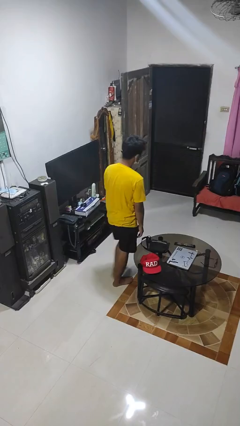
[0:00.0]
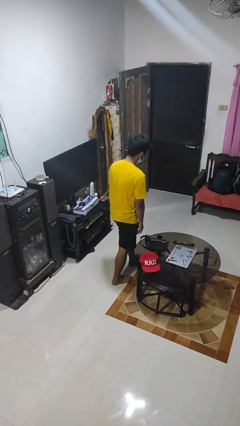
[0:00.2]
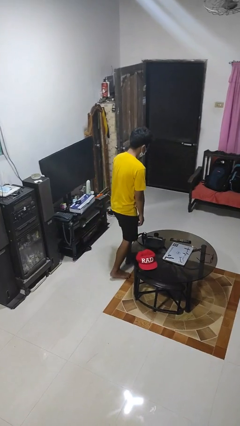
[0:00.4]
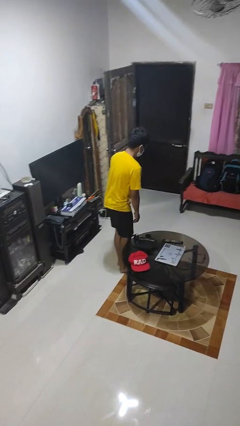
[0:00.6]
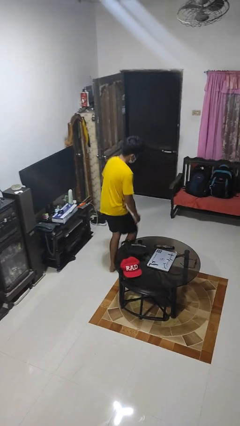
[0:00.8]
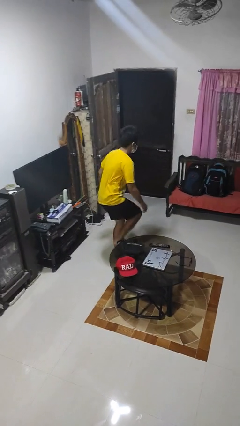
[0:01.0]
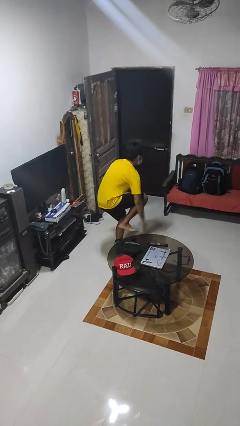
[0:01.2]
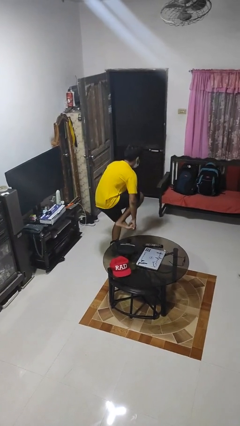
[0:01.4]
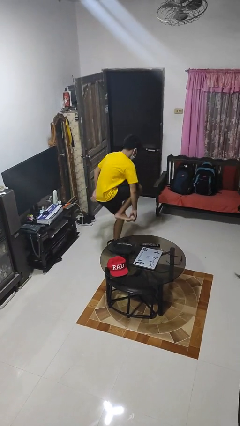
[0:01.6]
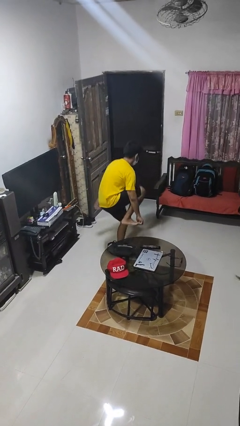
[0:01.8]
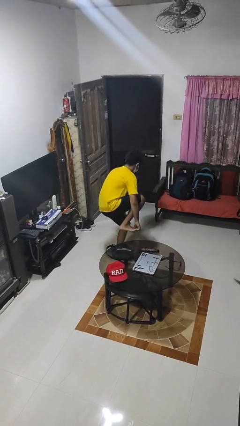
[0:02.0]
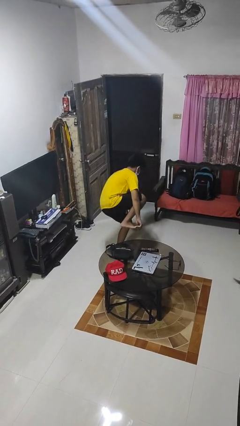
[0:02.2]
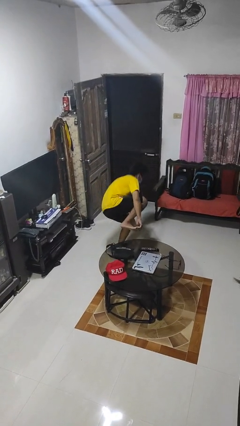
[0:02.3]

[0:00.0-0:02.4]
person trips on object on floor

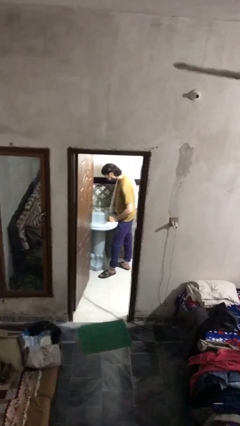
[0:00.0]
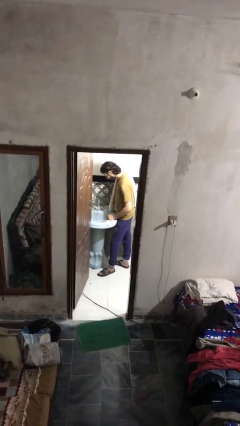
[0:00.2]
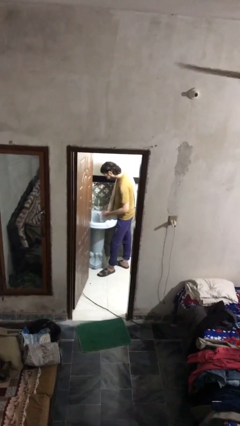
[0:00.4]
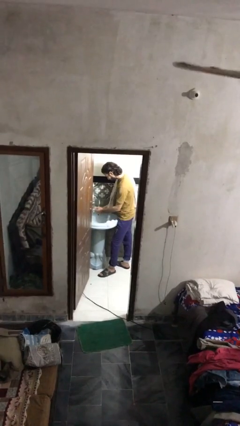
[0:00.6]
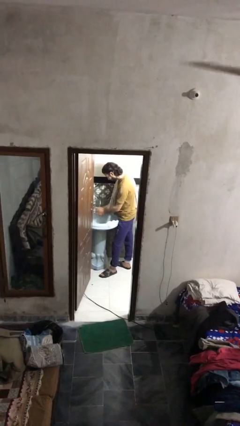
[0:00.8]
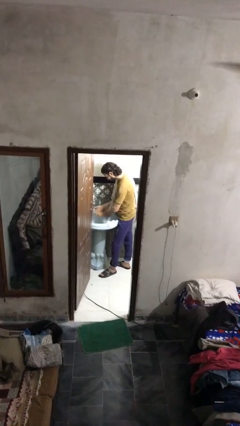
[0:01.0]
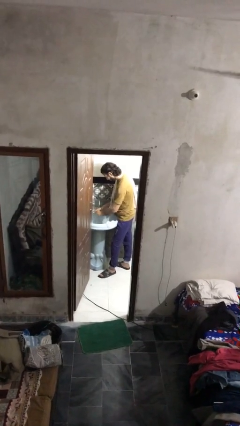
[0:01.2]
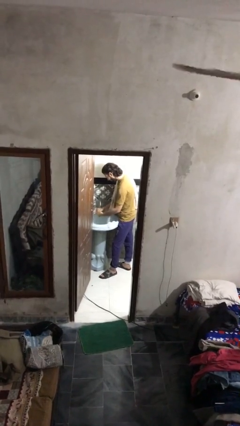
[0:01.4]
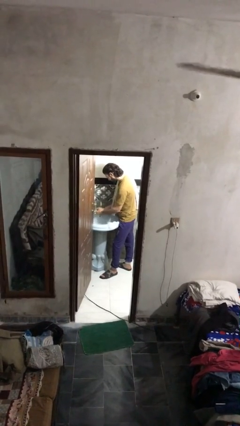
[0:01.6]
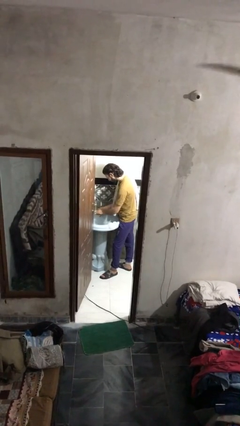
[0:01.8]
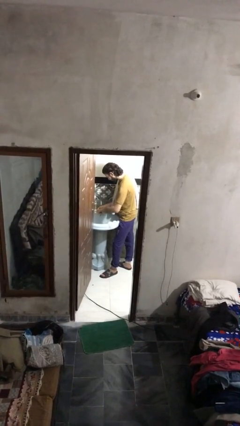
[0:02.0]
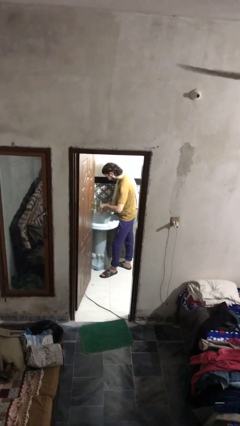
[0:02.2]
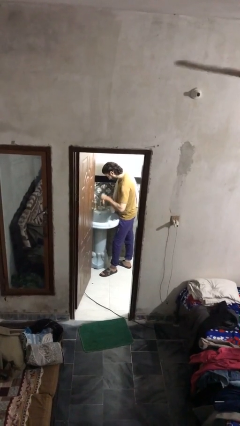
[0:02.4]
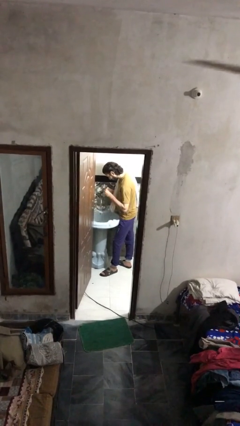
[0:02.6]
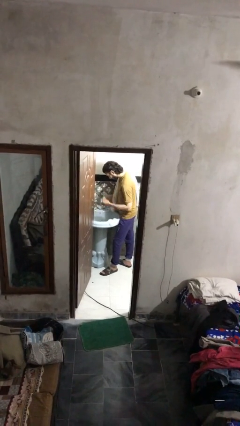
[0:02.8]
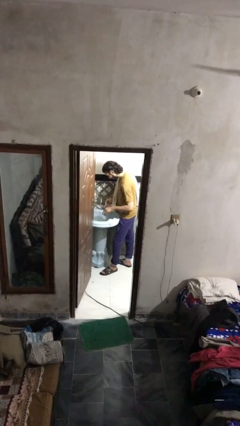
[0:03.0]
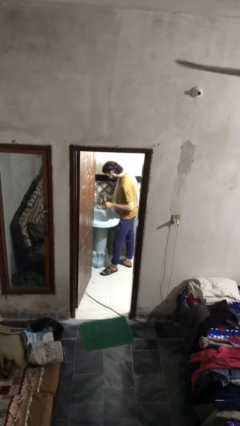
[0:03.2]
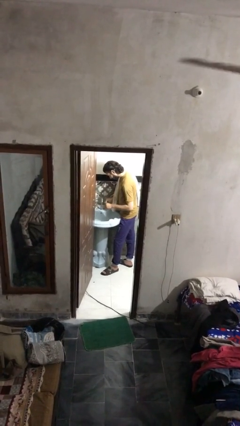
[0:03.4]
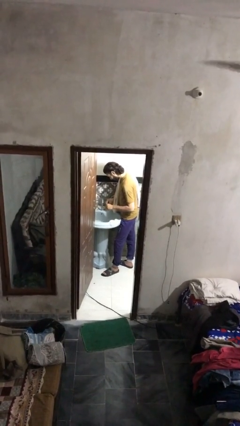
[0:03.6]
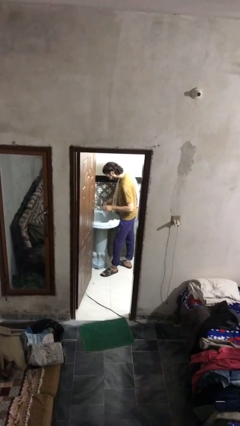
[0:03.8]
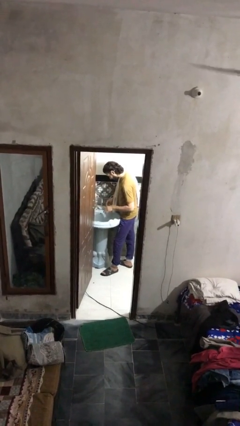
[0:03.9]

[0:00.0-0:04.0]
person washes hands

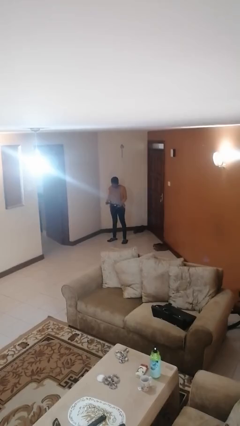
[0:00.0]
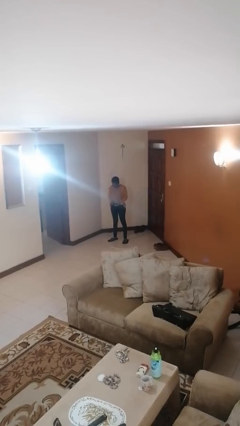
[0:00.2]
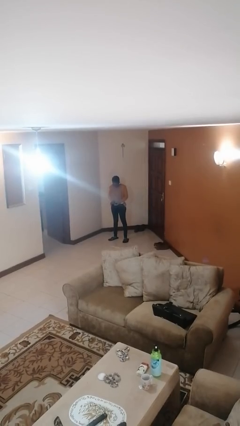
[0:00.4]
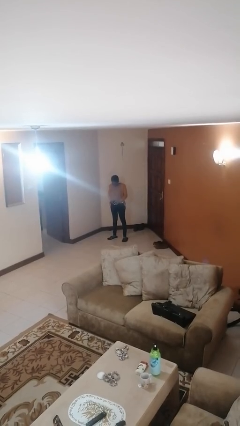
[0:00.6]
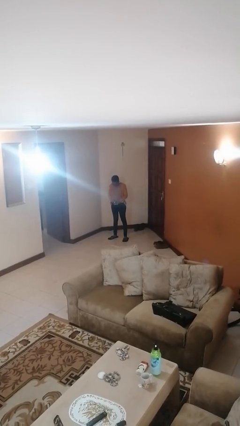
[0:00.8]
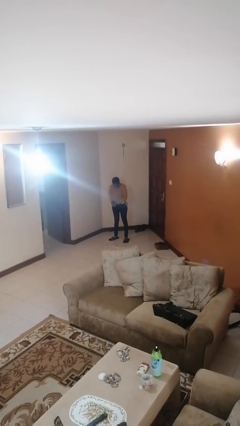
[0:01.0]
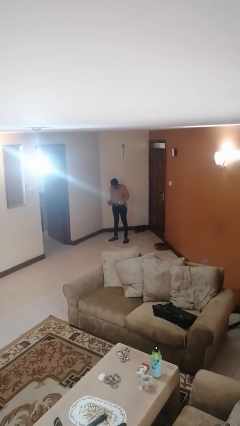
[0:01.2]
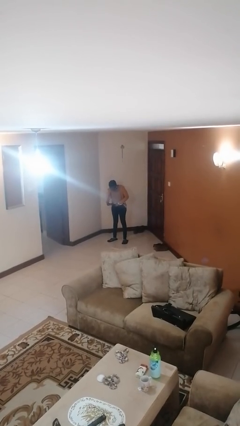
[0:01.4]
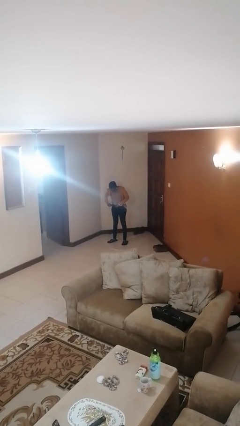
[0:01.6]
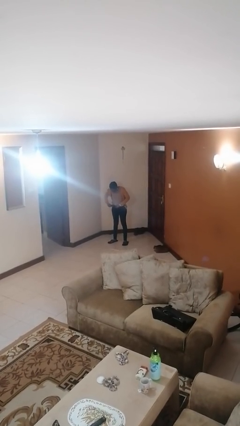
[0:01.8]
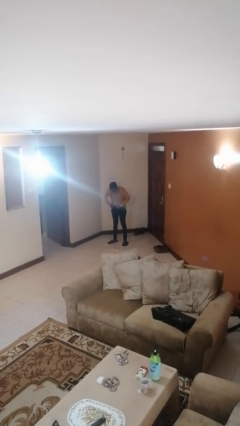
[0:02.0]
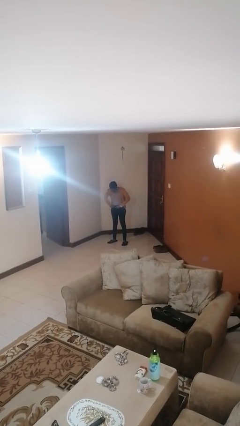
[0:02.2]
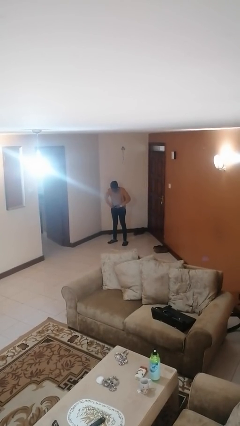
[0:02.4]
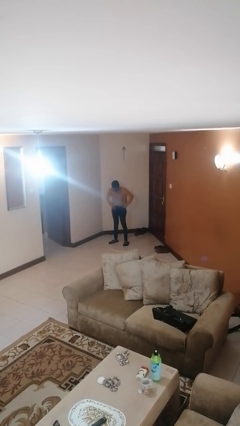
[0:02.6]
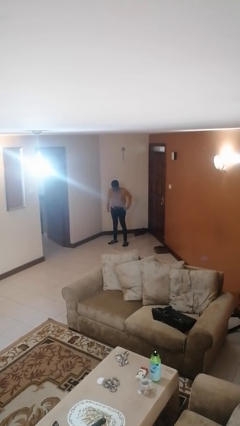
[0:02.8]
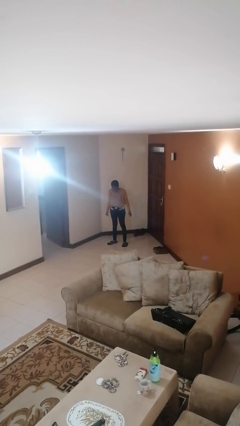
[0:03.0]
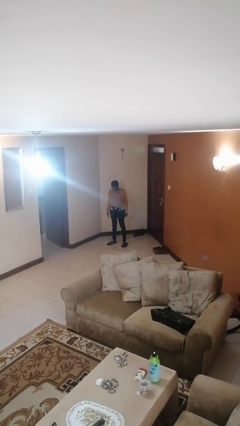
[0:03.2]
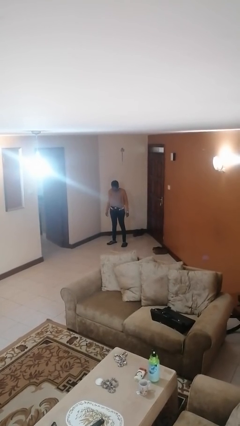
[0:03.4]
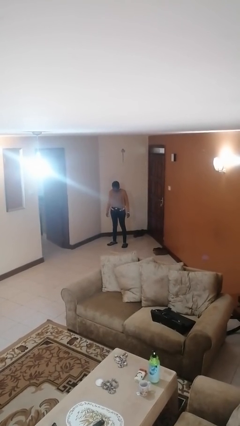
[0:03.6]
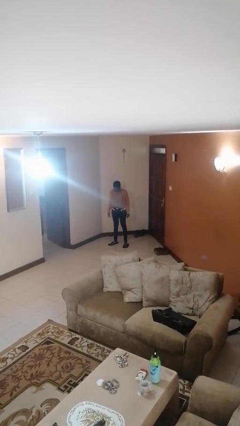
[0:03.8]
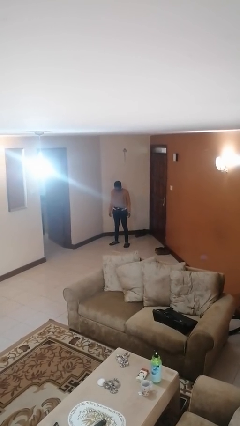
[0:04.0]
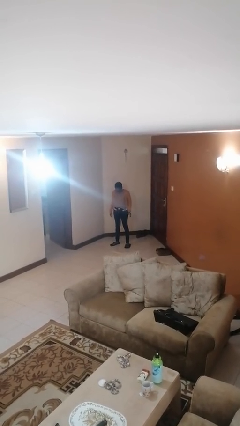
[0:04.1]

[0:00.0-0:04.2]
person puts on belt

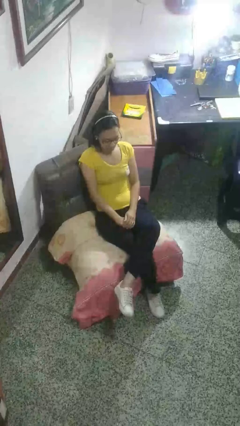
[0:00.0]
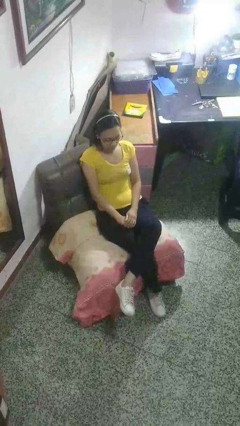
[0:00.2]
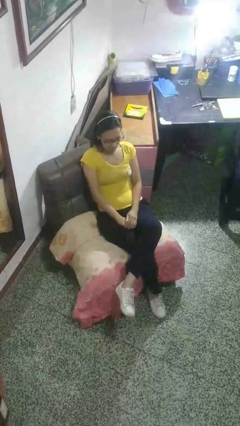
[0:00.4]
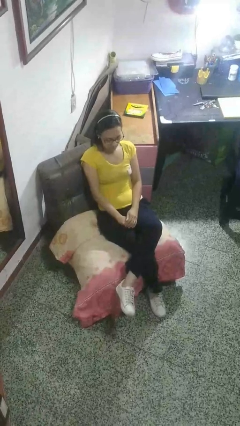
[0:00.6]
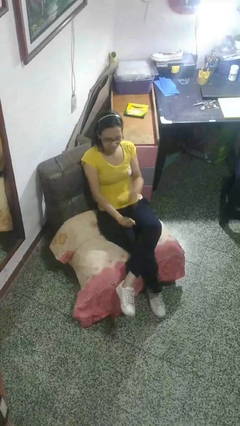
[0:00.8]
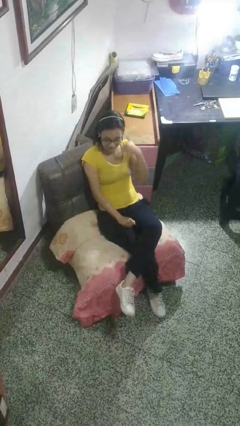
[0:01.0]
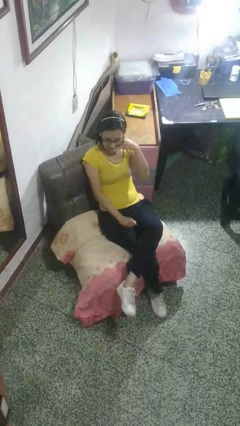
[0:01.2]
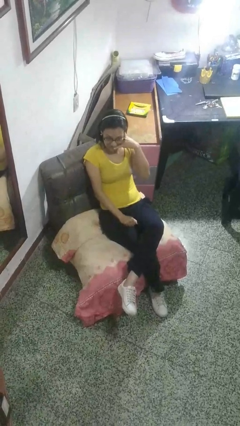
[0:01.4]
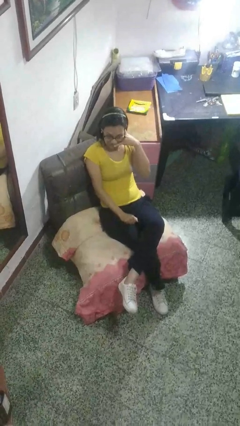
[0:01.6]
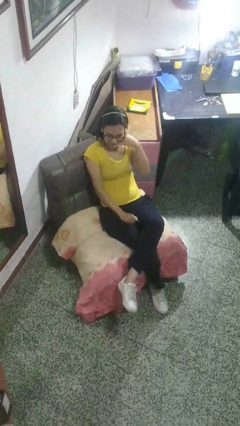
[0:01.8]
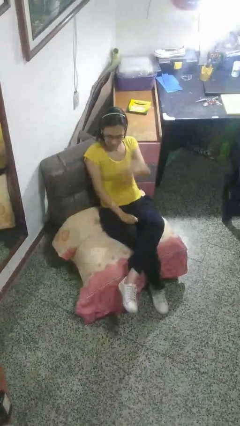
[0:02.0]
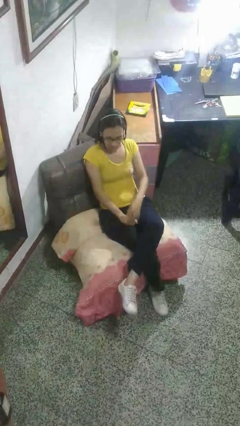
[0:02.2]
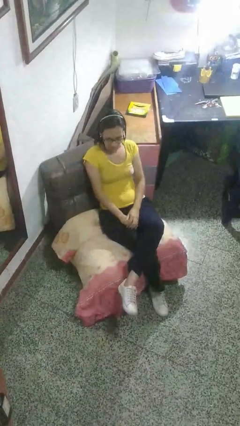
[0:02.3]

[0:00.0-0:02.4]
person gestures call me

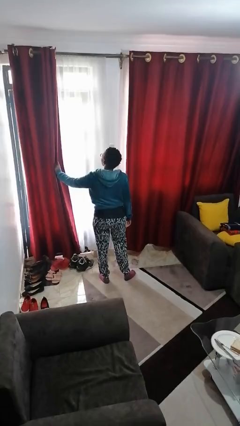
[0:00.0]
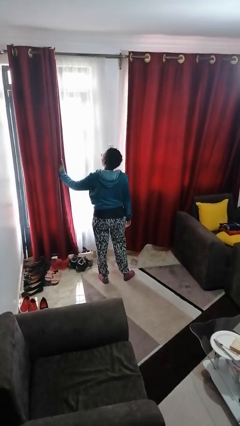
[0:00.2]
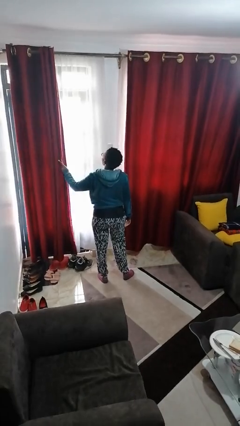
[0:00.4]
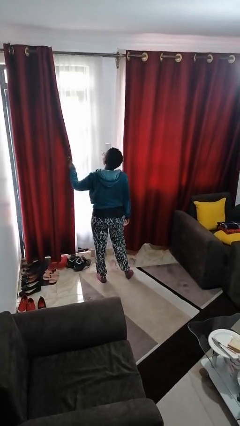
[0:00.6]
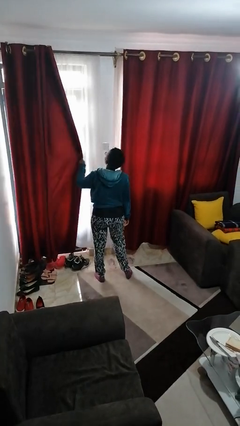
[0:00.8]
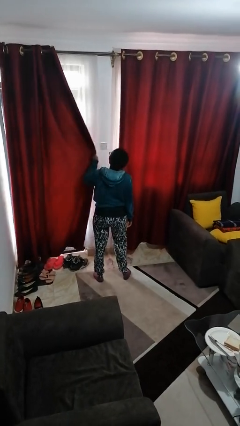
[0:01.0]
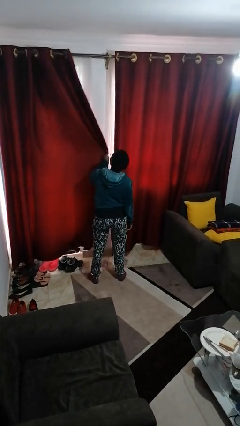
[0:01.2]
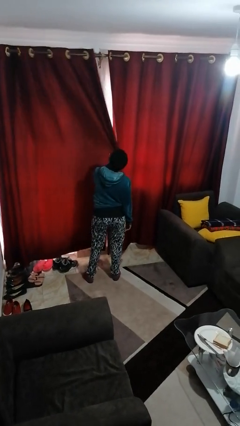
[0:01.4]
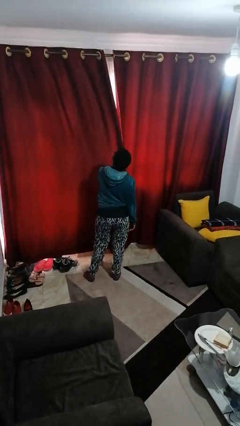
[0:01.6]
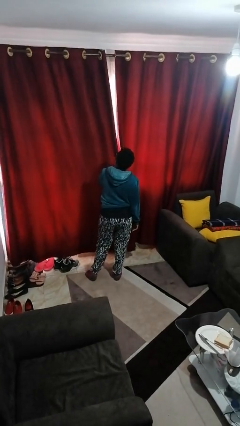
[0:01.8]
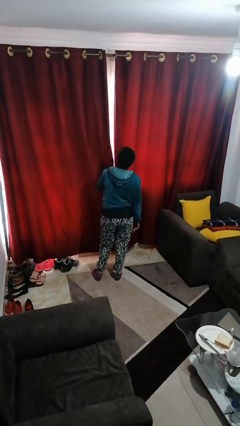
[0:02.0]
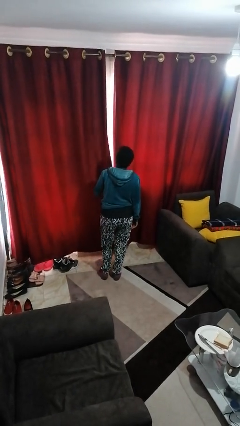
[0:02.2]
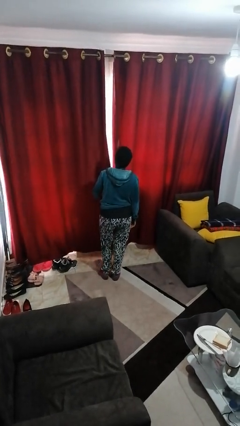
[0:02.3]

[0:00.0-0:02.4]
person closes curtains

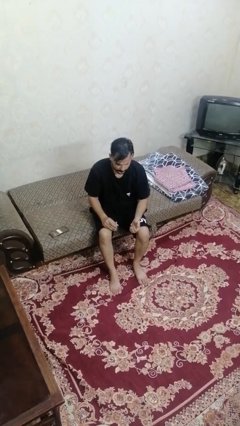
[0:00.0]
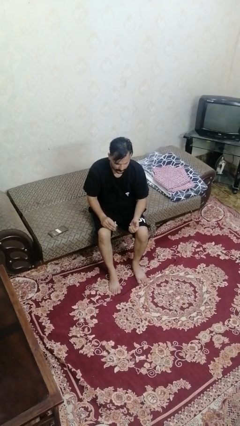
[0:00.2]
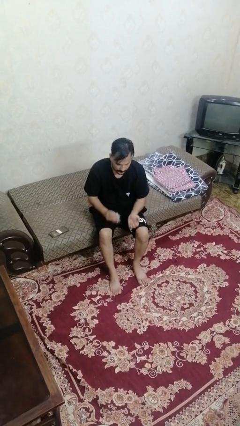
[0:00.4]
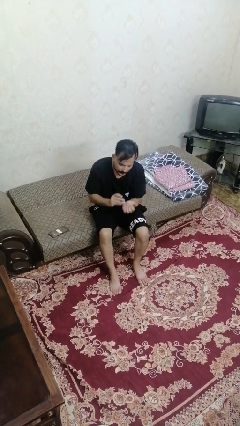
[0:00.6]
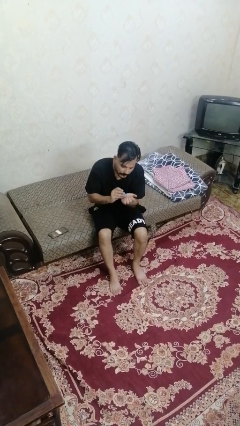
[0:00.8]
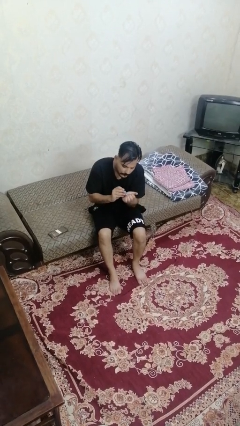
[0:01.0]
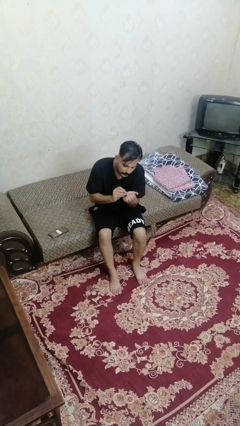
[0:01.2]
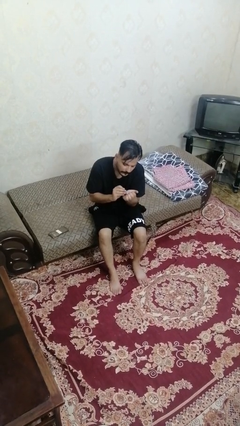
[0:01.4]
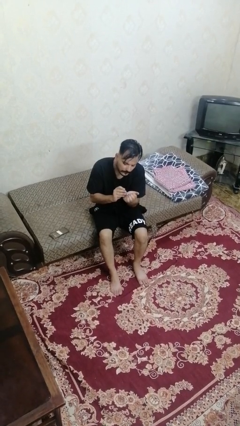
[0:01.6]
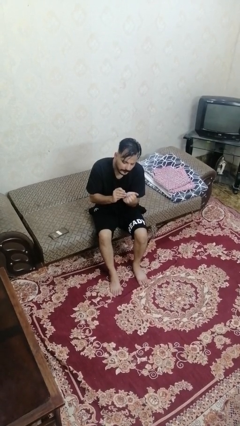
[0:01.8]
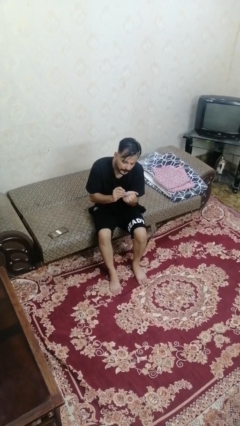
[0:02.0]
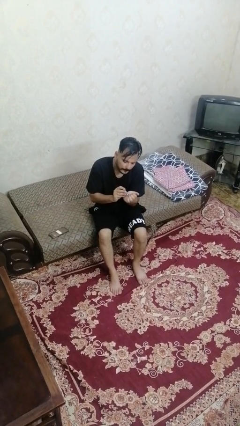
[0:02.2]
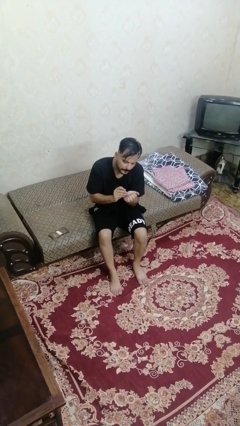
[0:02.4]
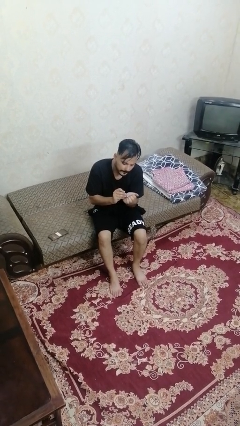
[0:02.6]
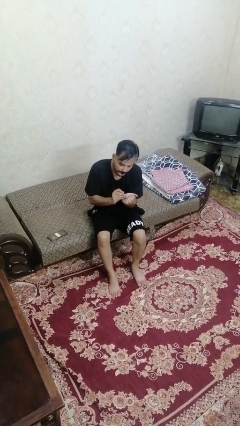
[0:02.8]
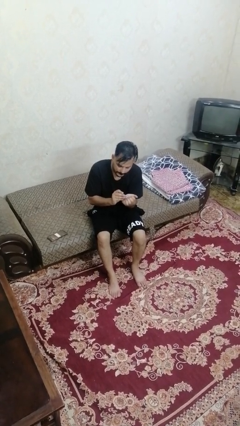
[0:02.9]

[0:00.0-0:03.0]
person clips fingernails
